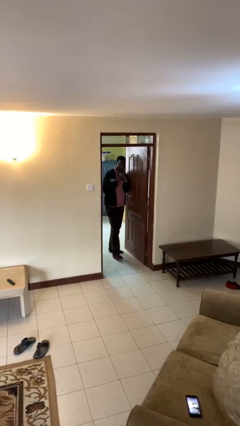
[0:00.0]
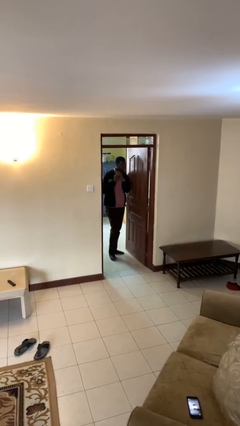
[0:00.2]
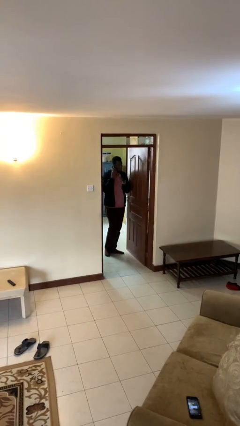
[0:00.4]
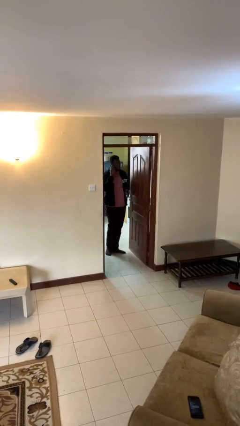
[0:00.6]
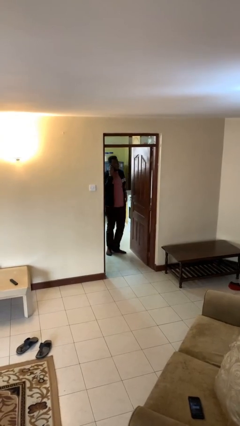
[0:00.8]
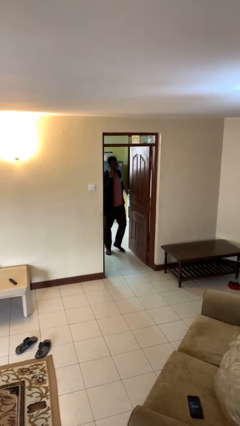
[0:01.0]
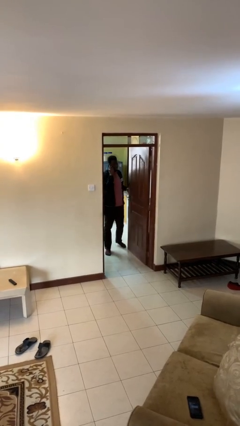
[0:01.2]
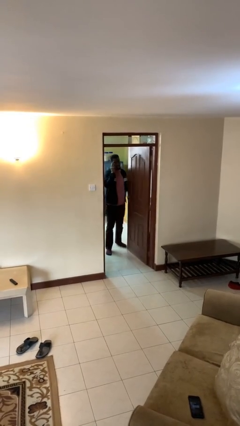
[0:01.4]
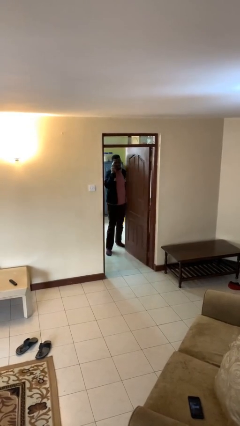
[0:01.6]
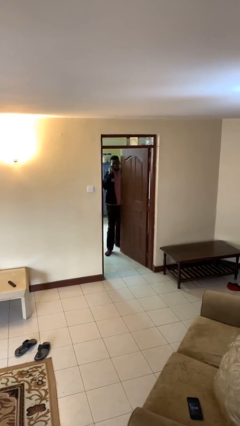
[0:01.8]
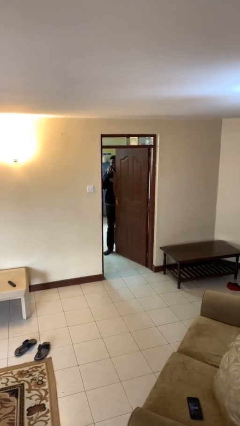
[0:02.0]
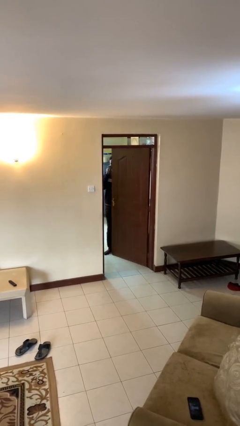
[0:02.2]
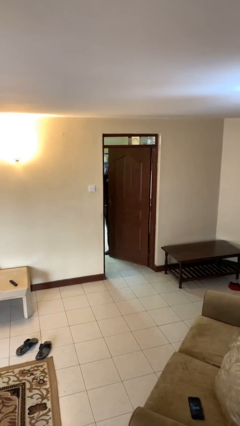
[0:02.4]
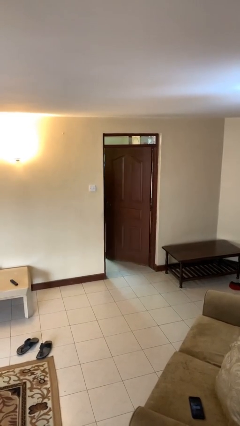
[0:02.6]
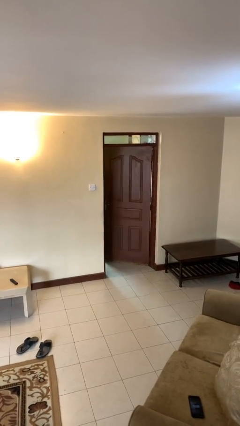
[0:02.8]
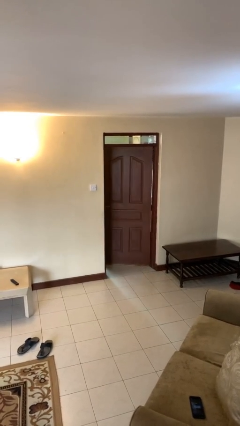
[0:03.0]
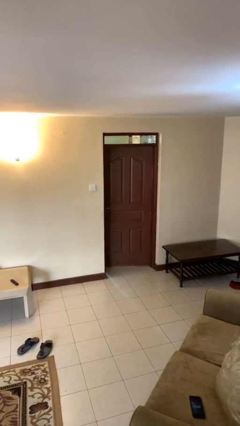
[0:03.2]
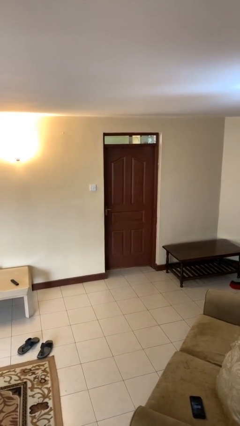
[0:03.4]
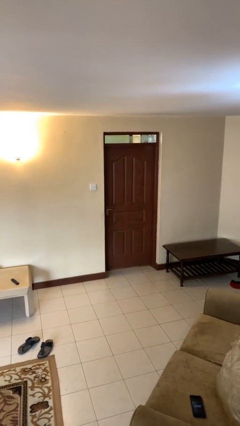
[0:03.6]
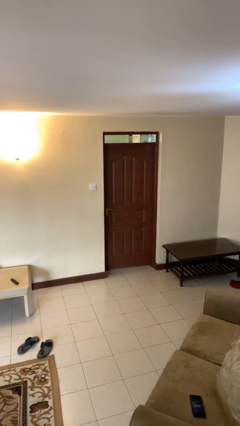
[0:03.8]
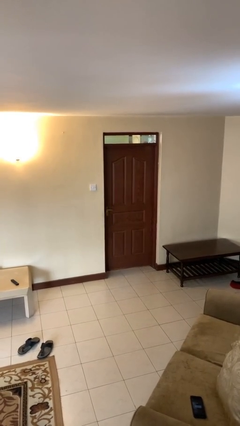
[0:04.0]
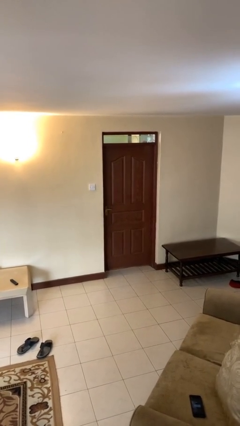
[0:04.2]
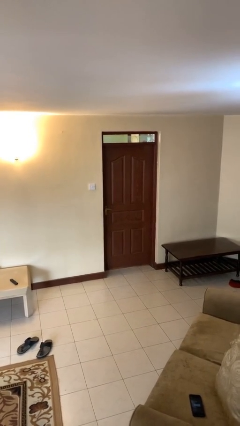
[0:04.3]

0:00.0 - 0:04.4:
person closes facility door

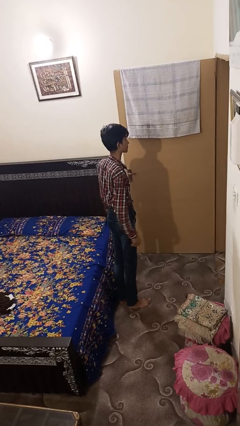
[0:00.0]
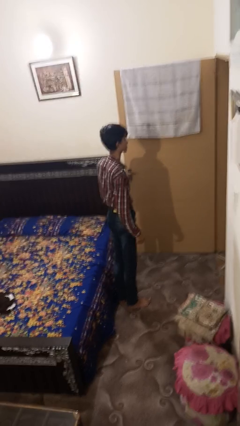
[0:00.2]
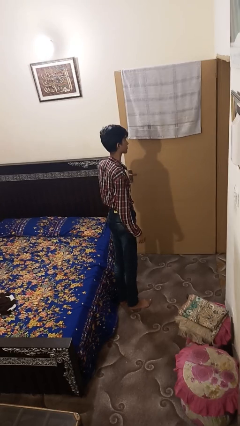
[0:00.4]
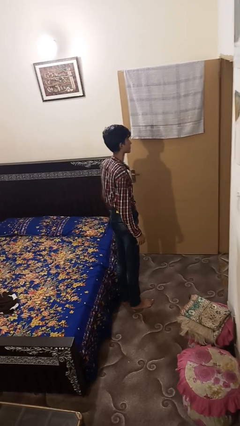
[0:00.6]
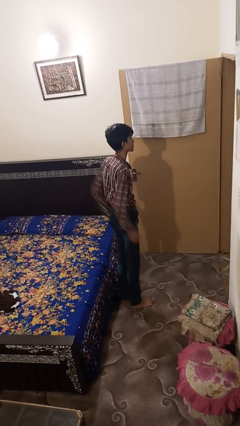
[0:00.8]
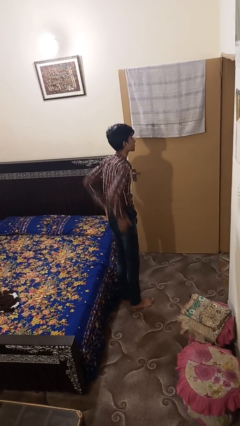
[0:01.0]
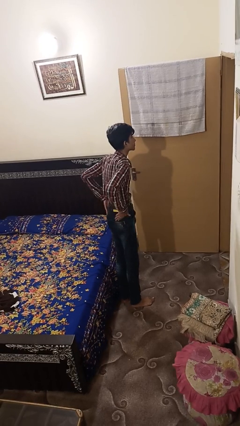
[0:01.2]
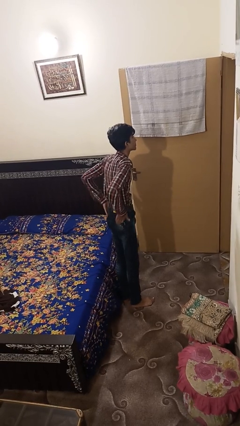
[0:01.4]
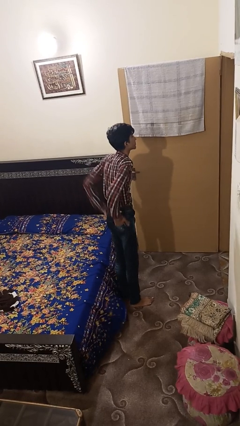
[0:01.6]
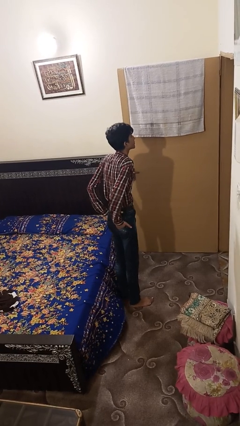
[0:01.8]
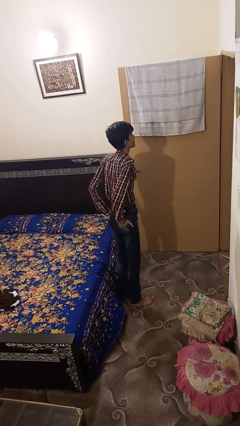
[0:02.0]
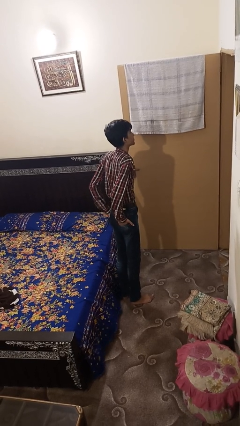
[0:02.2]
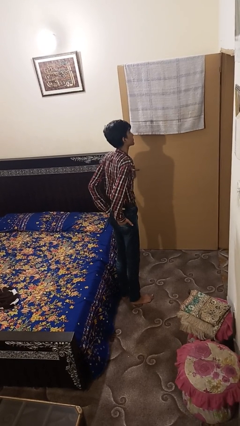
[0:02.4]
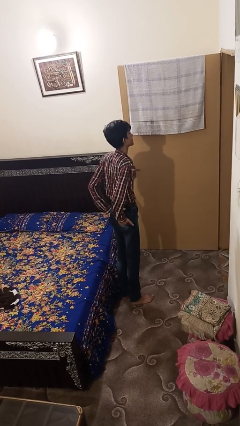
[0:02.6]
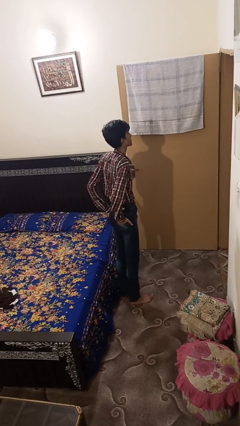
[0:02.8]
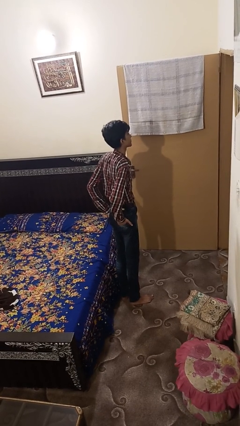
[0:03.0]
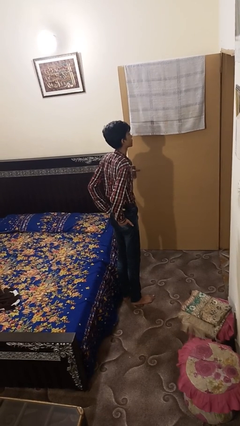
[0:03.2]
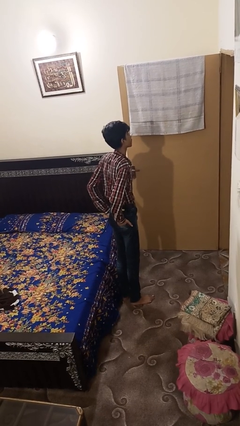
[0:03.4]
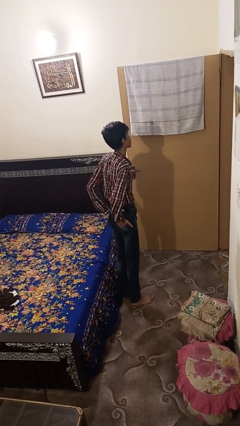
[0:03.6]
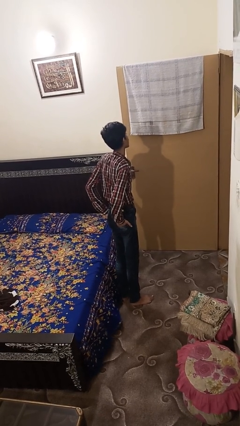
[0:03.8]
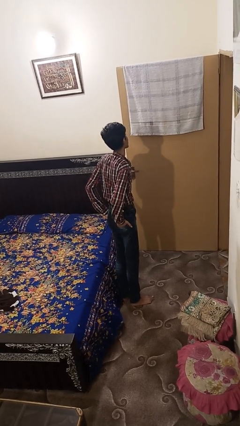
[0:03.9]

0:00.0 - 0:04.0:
person puts hands in back pockets

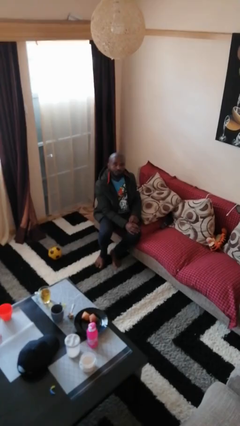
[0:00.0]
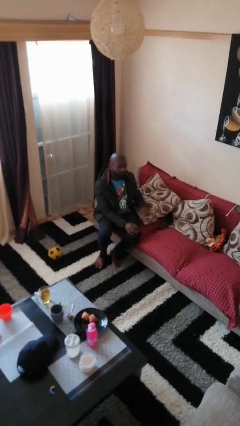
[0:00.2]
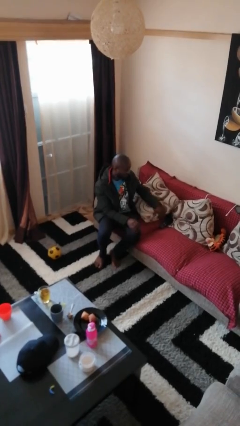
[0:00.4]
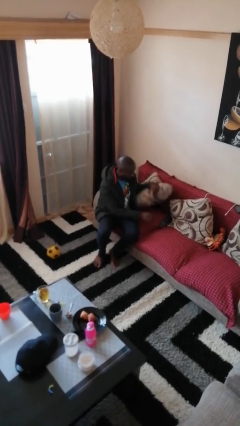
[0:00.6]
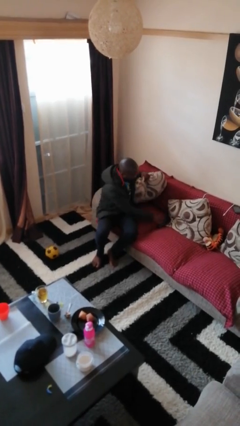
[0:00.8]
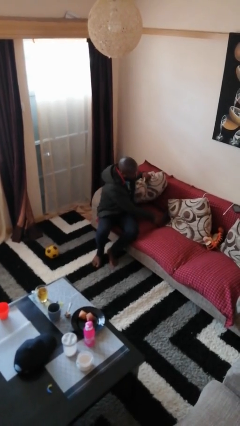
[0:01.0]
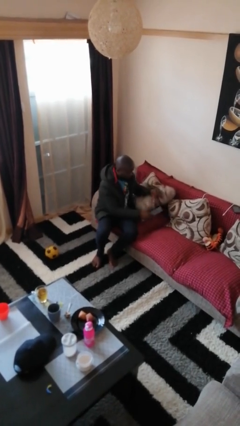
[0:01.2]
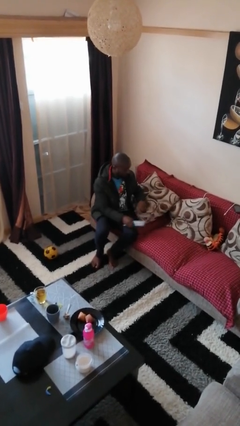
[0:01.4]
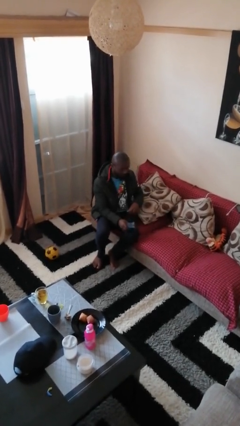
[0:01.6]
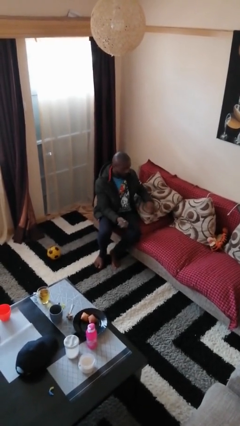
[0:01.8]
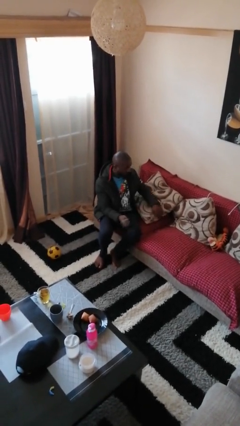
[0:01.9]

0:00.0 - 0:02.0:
person searches in couch

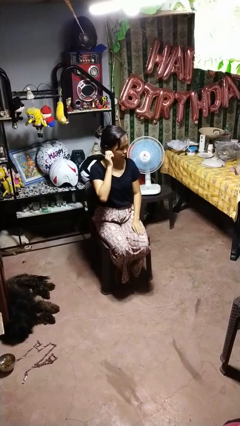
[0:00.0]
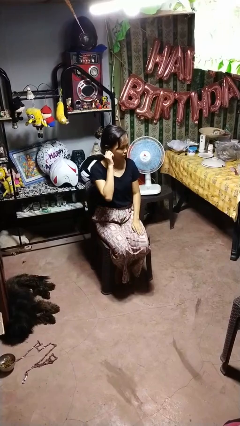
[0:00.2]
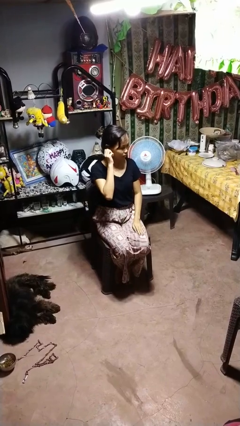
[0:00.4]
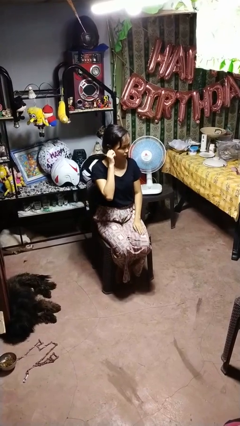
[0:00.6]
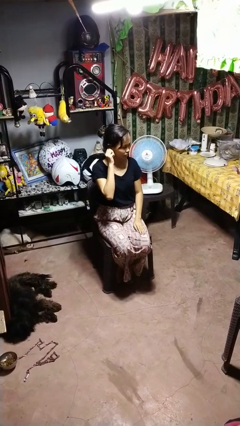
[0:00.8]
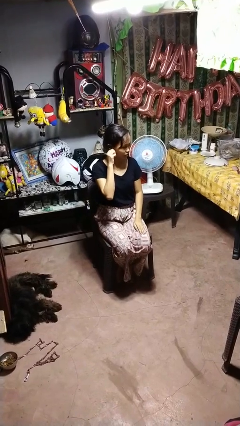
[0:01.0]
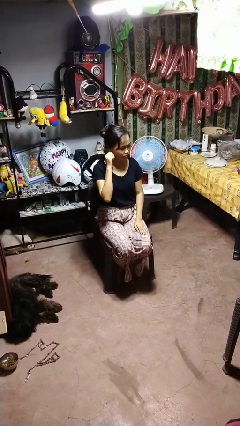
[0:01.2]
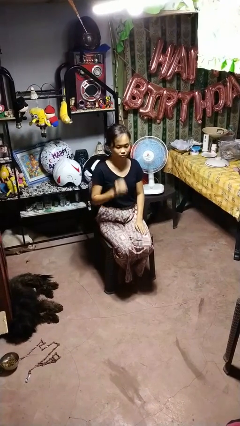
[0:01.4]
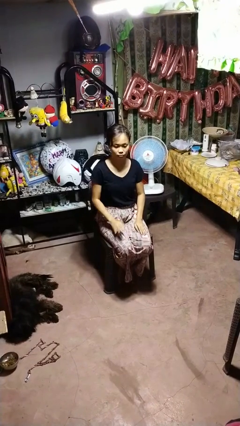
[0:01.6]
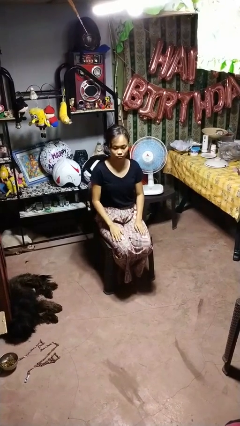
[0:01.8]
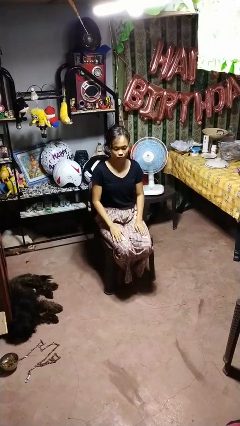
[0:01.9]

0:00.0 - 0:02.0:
person touches earlobe

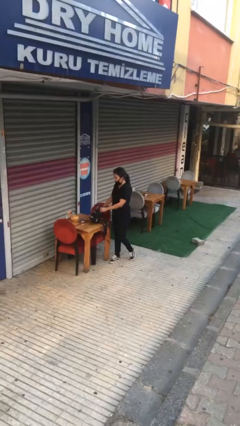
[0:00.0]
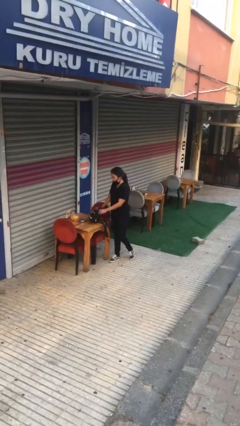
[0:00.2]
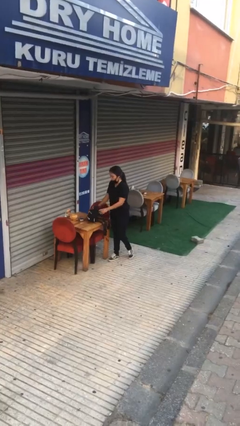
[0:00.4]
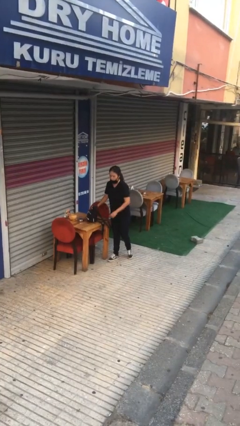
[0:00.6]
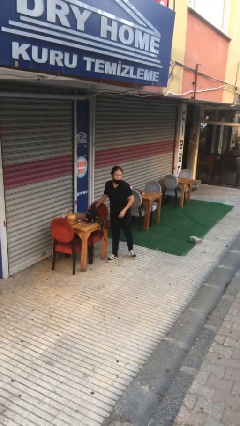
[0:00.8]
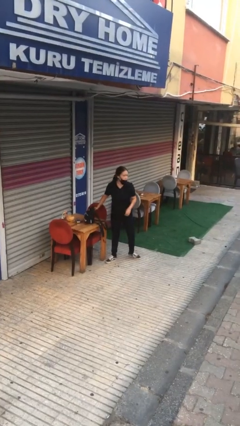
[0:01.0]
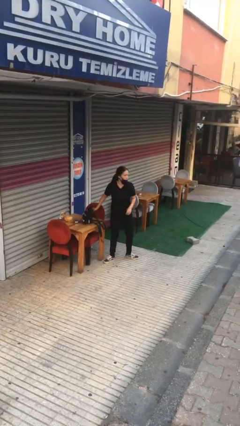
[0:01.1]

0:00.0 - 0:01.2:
person puts down object on table

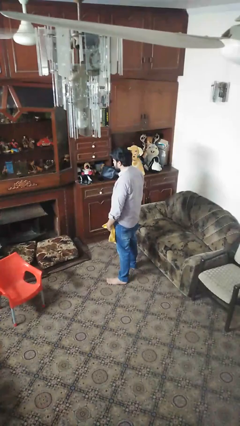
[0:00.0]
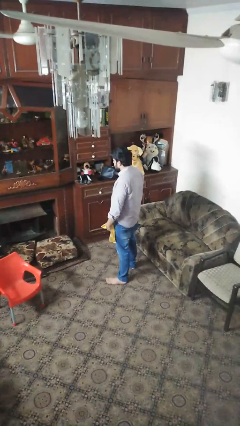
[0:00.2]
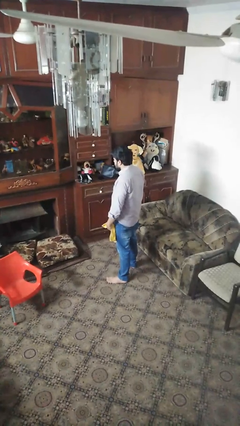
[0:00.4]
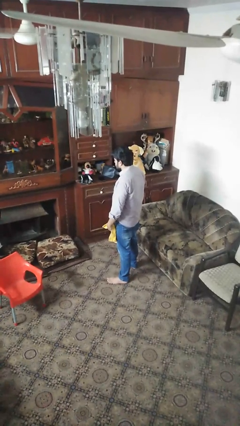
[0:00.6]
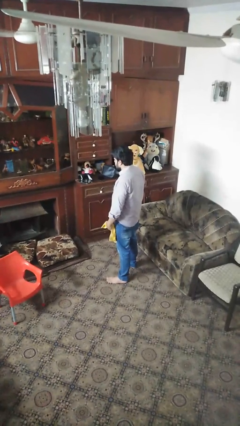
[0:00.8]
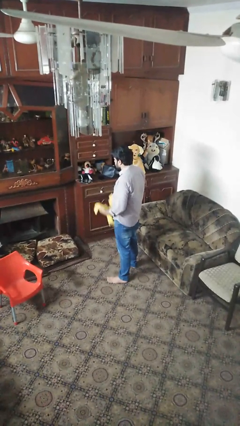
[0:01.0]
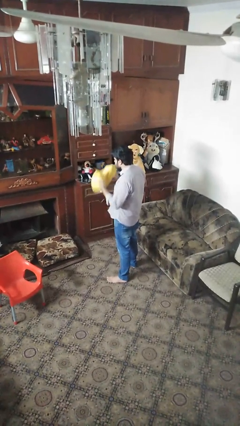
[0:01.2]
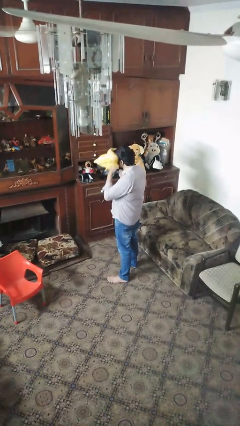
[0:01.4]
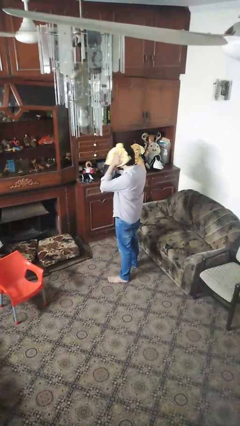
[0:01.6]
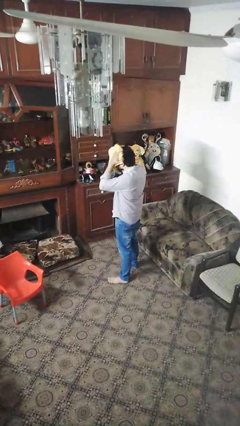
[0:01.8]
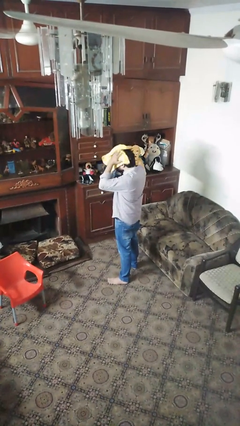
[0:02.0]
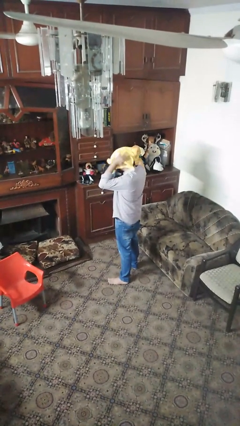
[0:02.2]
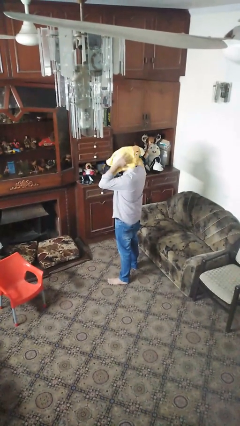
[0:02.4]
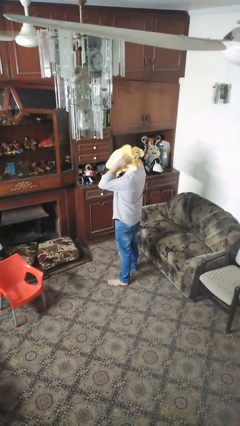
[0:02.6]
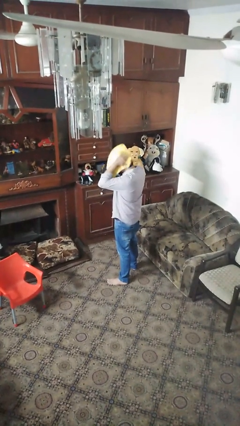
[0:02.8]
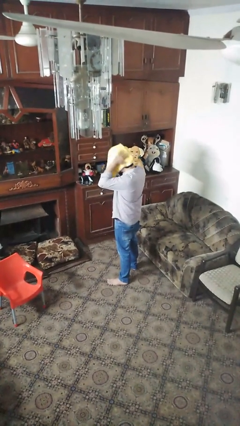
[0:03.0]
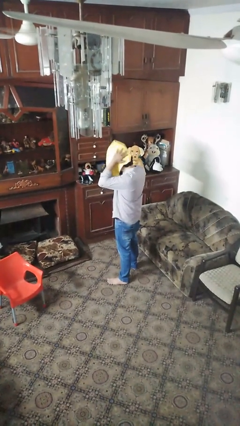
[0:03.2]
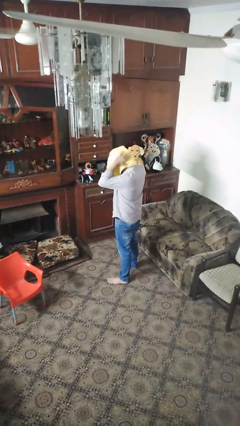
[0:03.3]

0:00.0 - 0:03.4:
person dries hair with towel

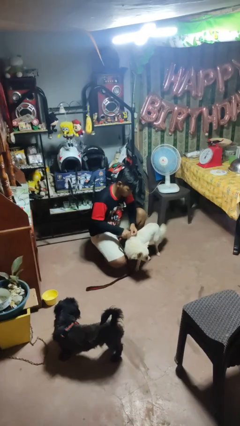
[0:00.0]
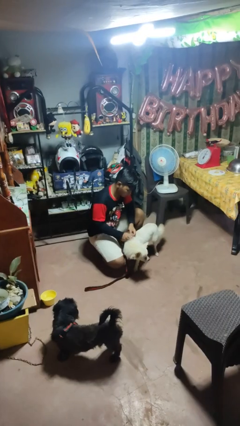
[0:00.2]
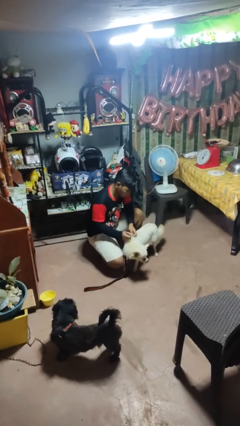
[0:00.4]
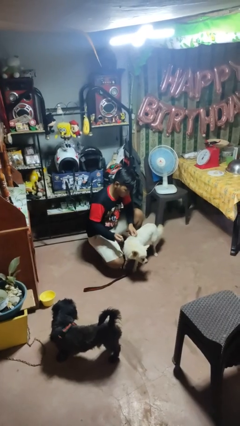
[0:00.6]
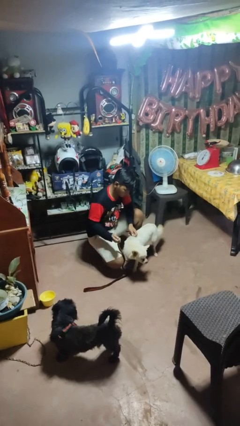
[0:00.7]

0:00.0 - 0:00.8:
person unattaches leash from dog
